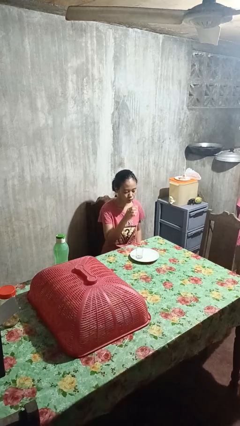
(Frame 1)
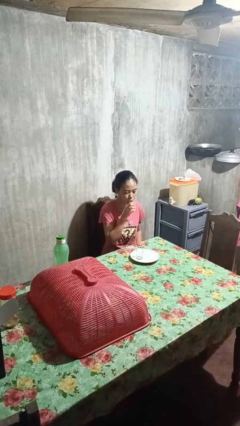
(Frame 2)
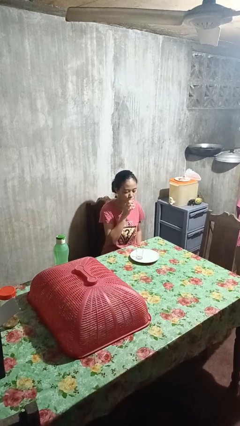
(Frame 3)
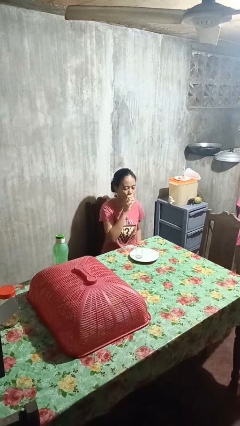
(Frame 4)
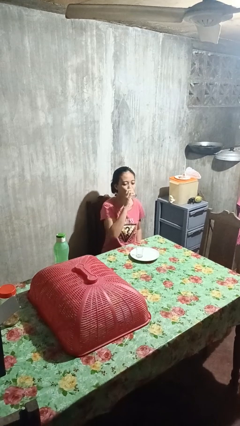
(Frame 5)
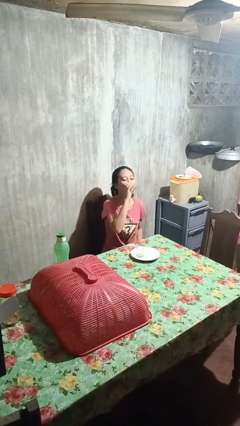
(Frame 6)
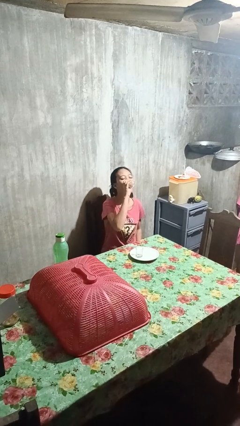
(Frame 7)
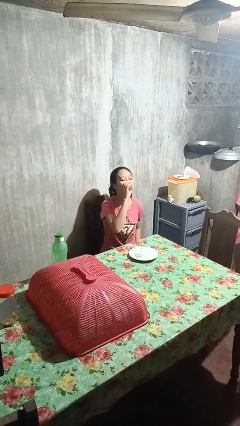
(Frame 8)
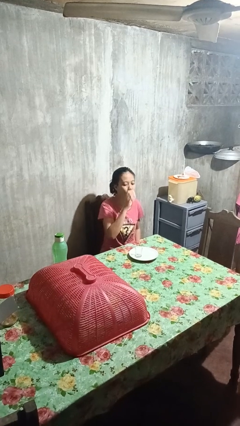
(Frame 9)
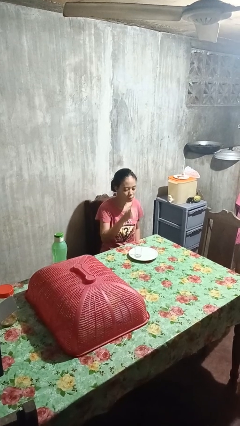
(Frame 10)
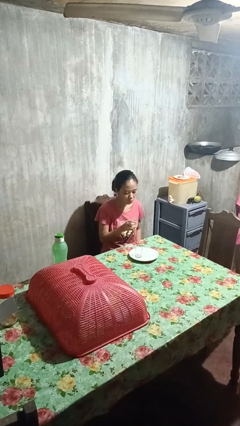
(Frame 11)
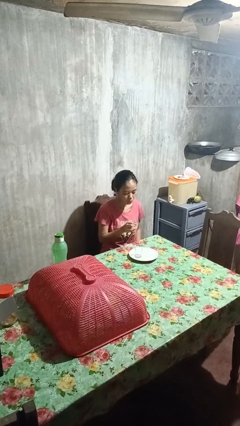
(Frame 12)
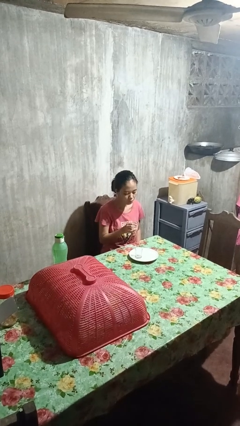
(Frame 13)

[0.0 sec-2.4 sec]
person drinks from shotglass

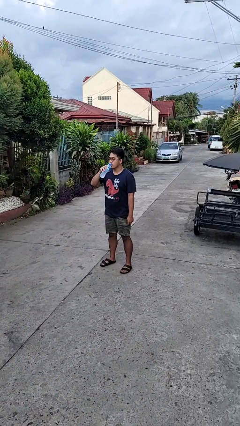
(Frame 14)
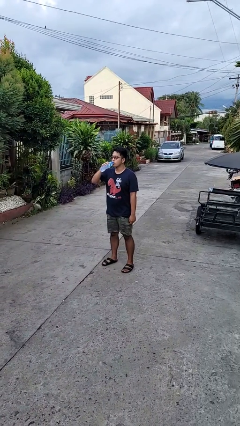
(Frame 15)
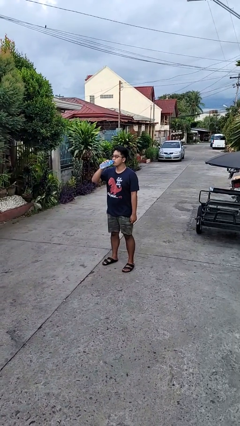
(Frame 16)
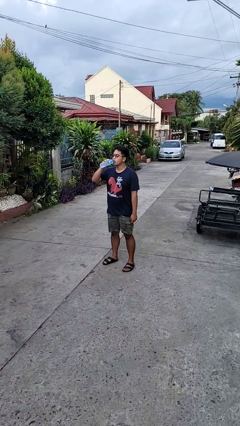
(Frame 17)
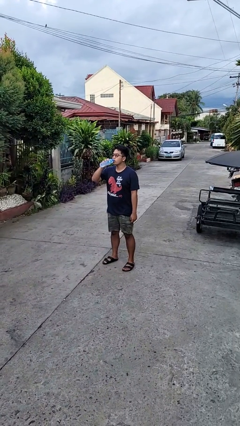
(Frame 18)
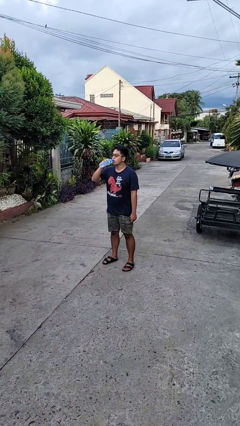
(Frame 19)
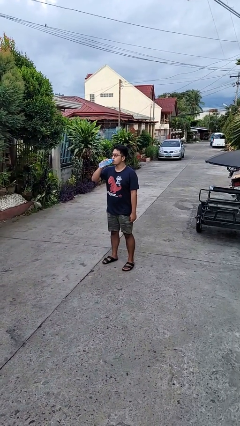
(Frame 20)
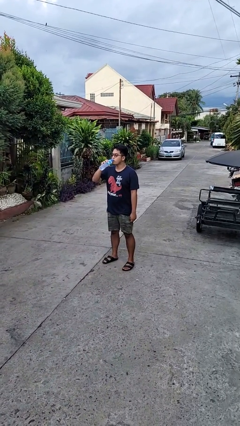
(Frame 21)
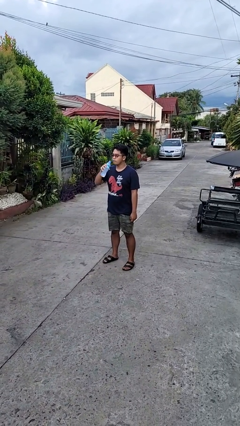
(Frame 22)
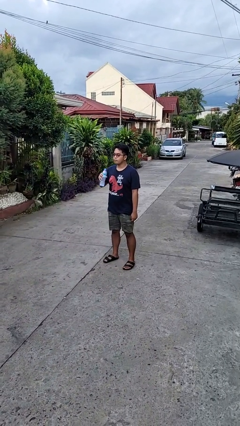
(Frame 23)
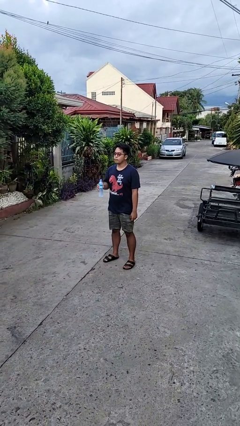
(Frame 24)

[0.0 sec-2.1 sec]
person drinks from bottle

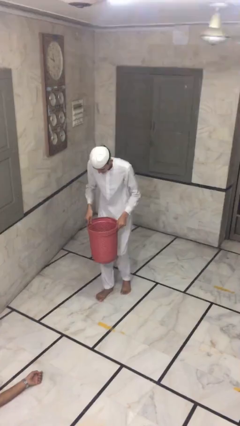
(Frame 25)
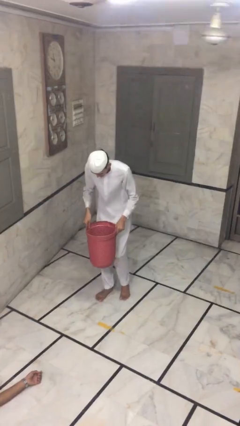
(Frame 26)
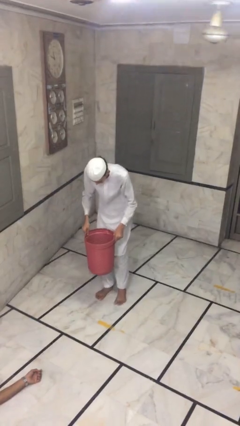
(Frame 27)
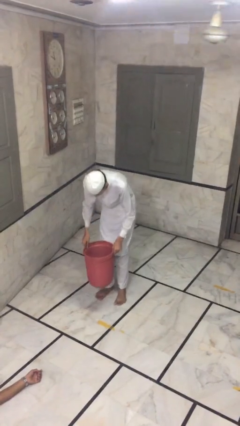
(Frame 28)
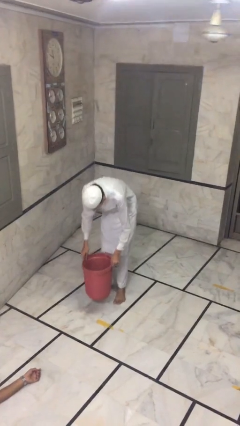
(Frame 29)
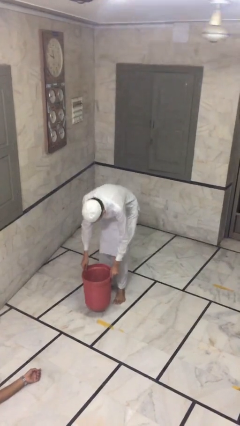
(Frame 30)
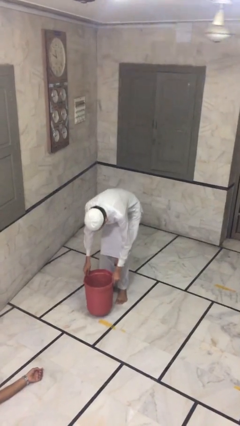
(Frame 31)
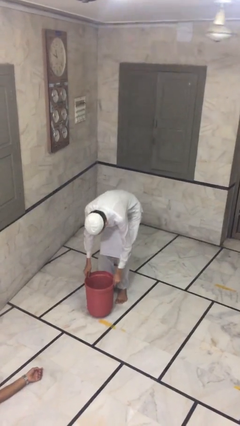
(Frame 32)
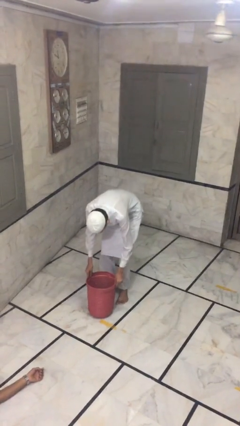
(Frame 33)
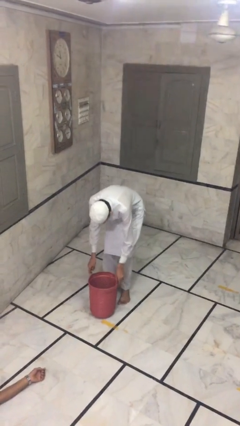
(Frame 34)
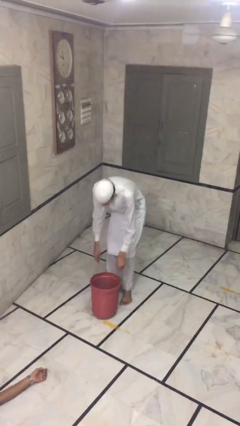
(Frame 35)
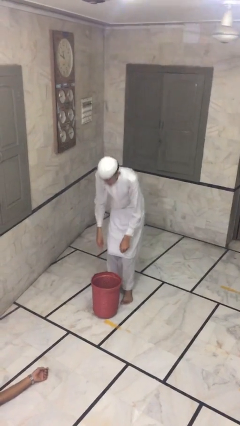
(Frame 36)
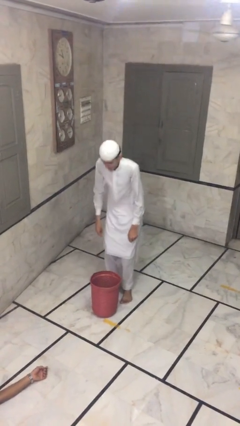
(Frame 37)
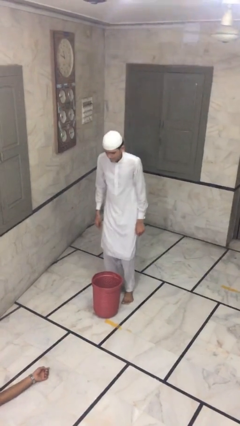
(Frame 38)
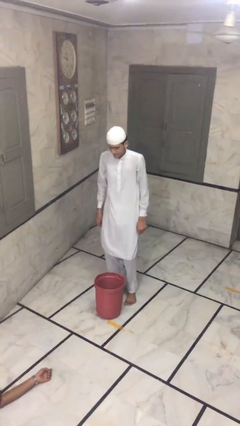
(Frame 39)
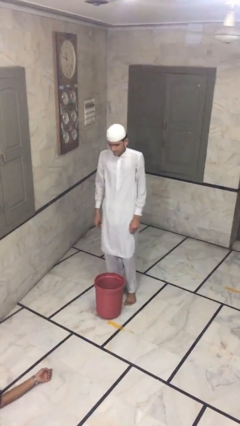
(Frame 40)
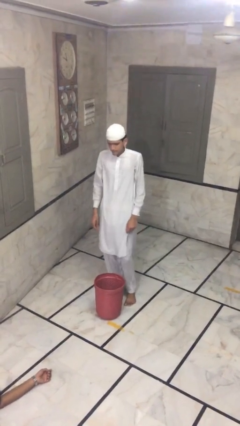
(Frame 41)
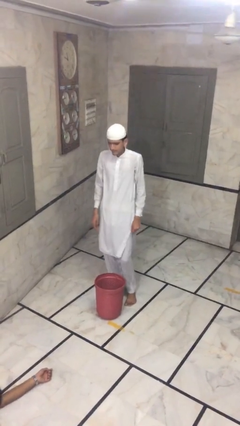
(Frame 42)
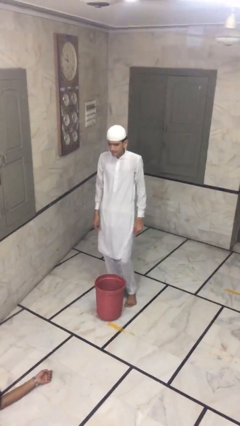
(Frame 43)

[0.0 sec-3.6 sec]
person puts down object on floor

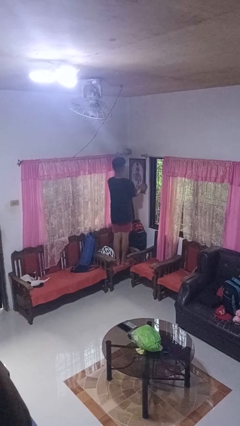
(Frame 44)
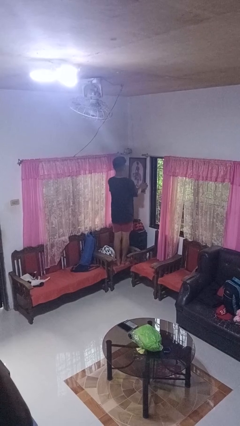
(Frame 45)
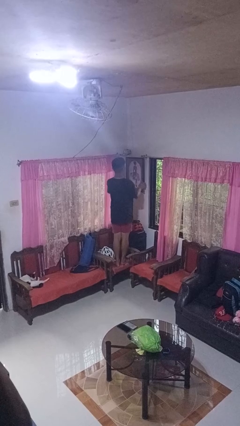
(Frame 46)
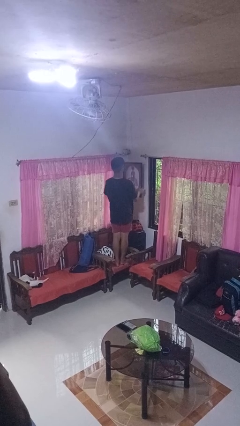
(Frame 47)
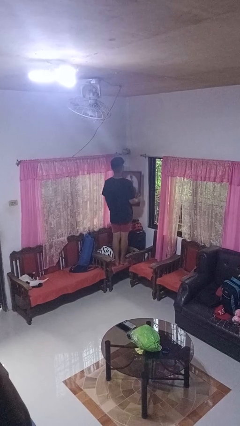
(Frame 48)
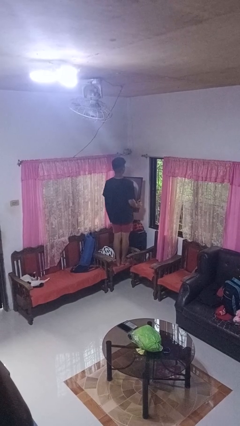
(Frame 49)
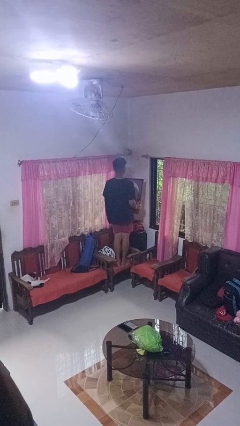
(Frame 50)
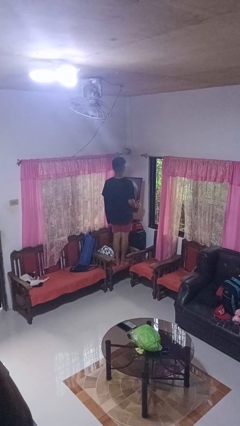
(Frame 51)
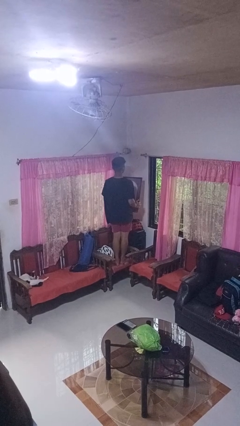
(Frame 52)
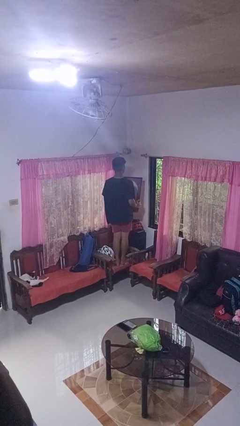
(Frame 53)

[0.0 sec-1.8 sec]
person takes down picture frame

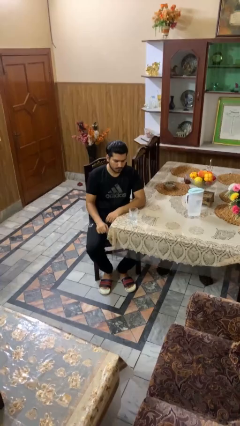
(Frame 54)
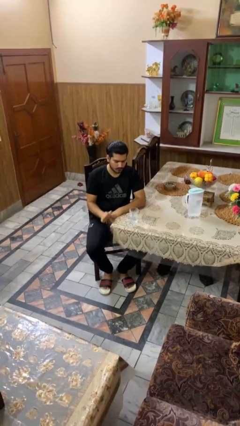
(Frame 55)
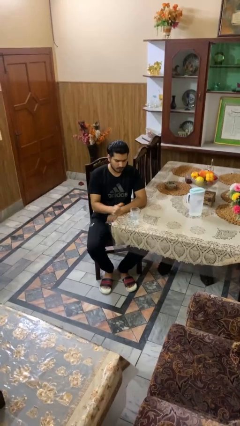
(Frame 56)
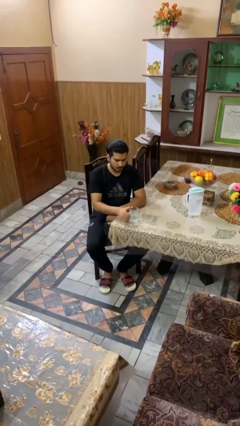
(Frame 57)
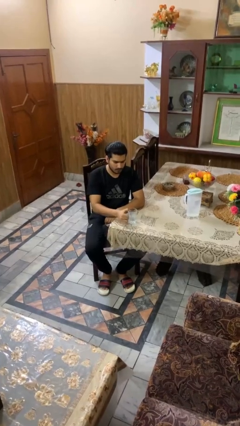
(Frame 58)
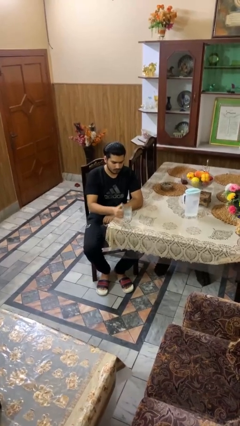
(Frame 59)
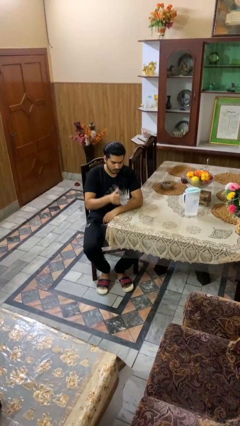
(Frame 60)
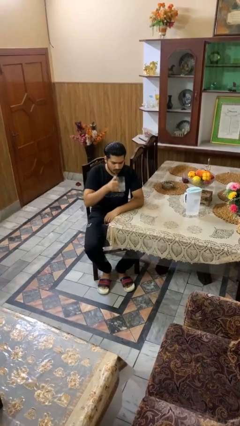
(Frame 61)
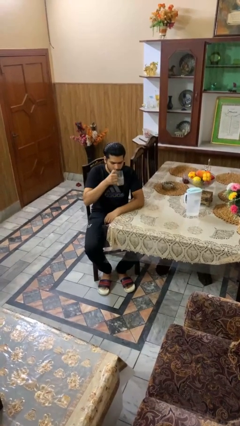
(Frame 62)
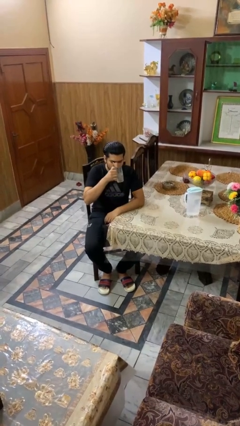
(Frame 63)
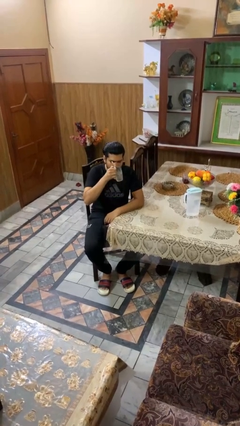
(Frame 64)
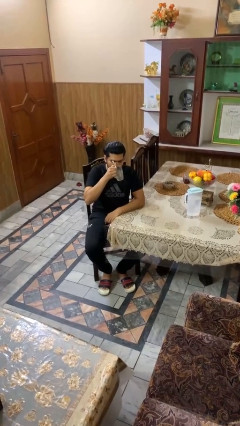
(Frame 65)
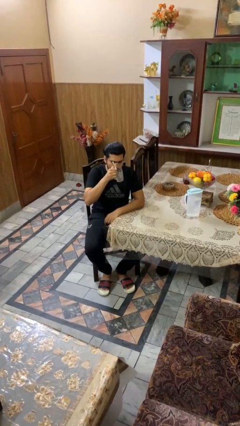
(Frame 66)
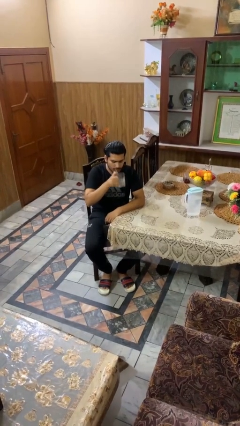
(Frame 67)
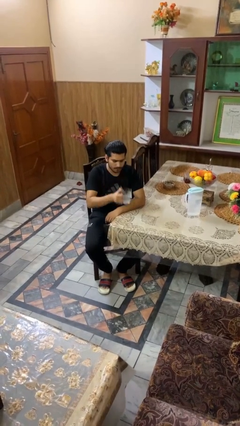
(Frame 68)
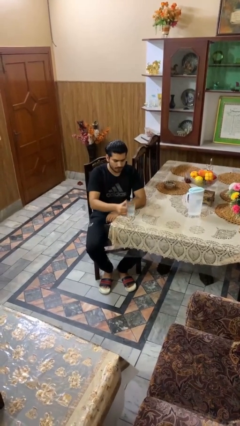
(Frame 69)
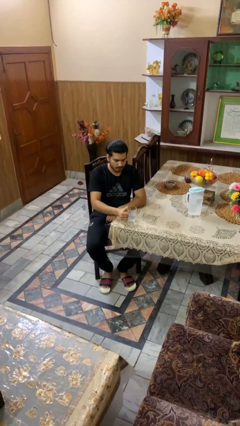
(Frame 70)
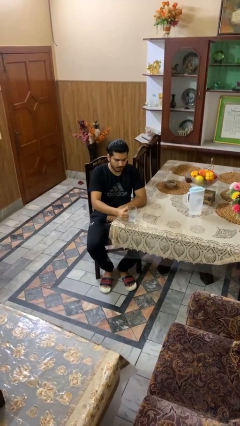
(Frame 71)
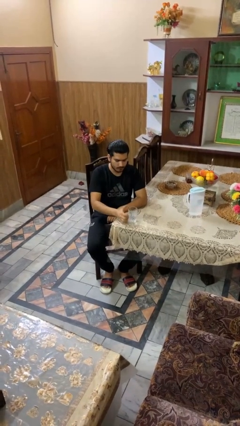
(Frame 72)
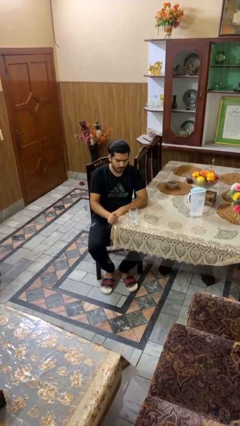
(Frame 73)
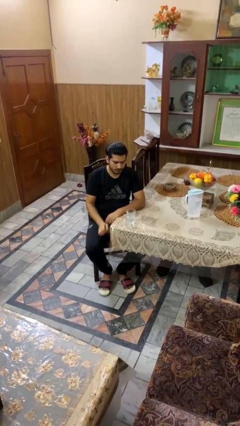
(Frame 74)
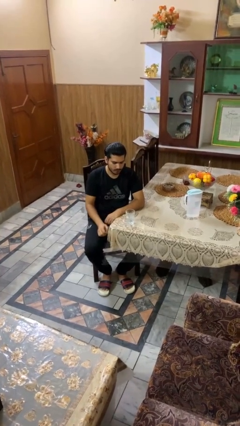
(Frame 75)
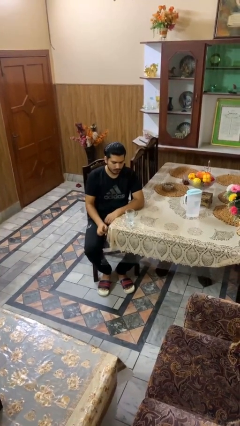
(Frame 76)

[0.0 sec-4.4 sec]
person drinks from mug

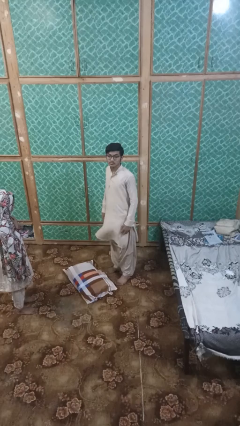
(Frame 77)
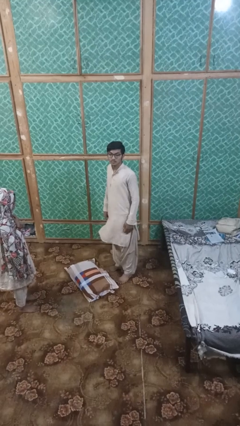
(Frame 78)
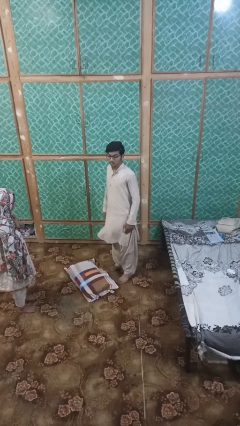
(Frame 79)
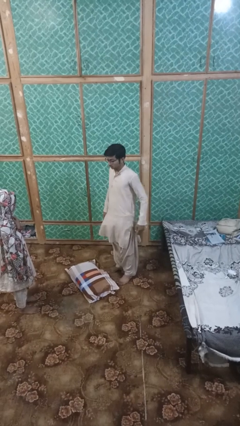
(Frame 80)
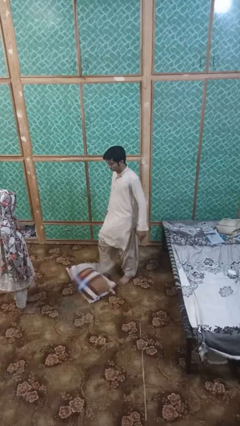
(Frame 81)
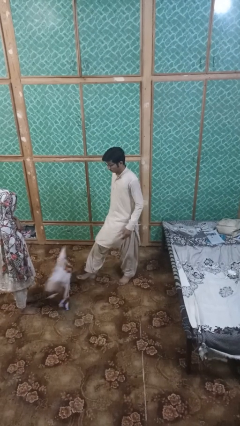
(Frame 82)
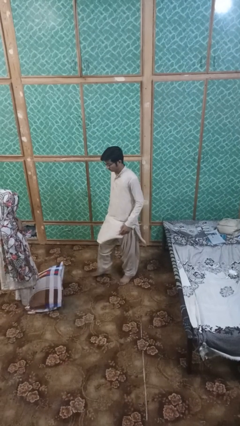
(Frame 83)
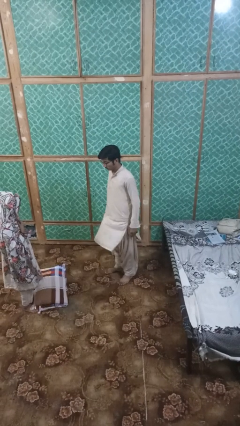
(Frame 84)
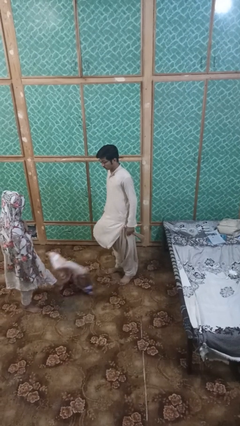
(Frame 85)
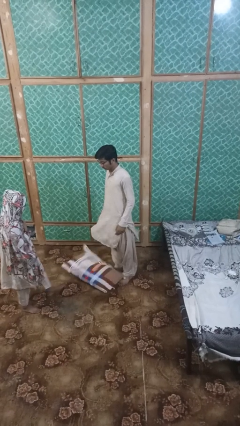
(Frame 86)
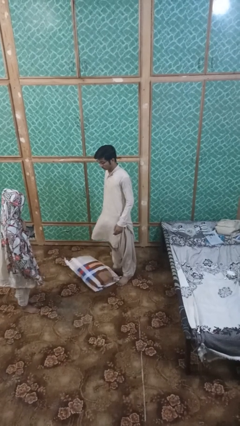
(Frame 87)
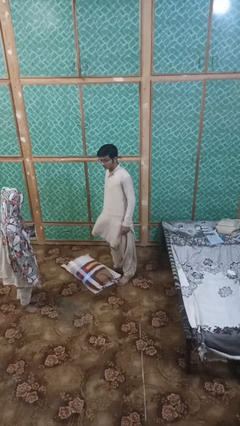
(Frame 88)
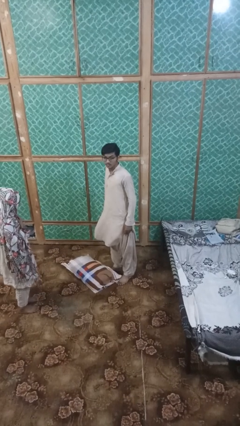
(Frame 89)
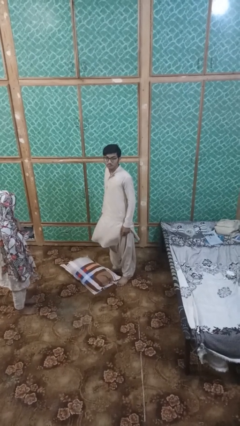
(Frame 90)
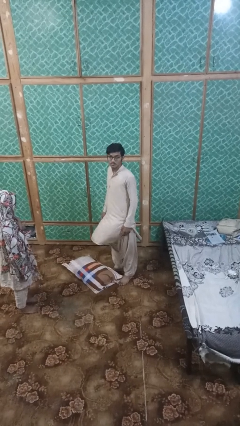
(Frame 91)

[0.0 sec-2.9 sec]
person kicks object to person

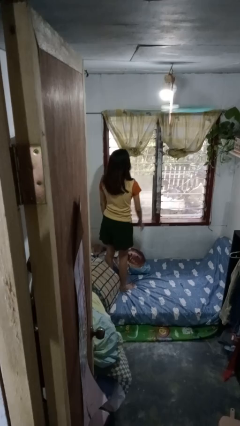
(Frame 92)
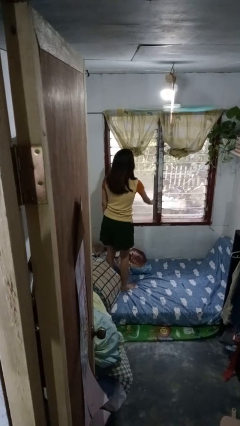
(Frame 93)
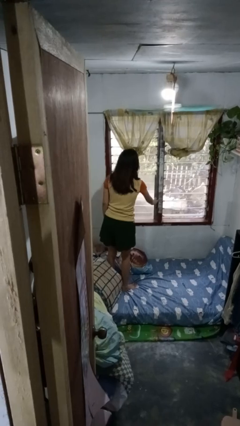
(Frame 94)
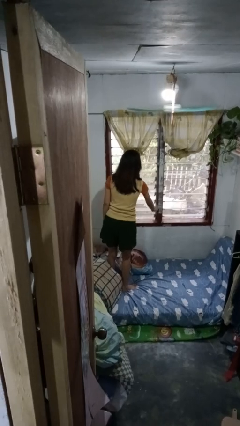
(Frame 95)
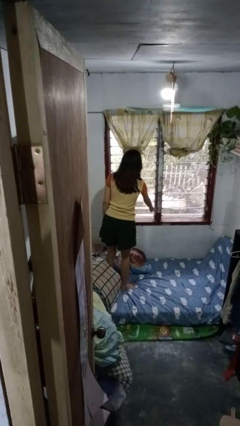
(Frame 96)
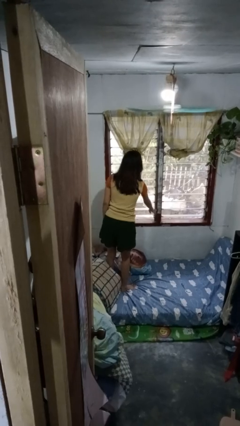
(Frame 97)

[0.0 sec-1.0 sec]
person opens home window
